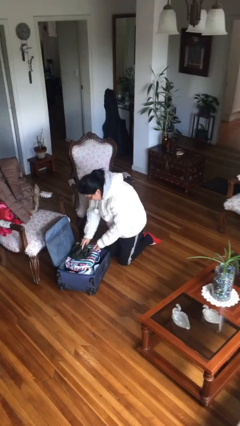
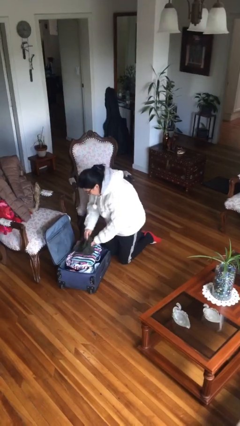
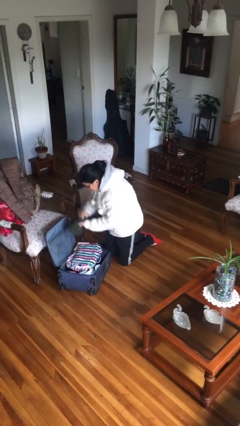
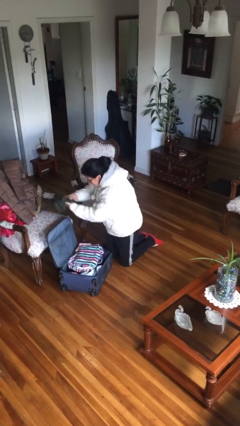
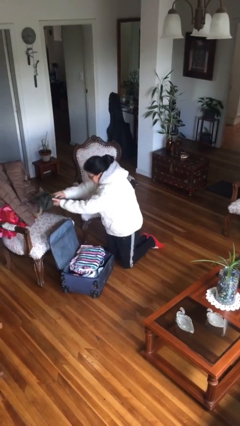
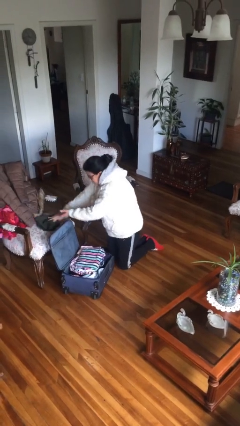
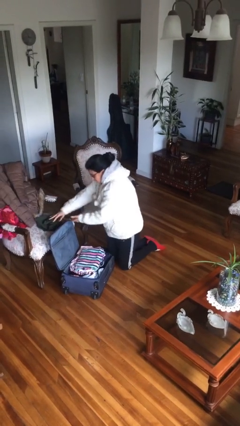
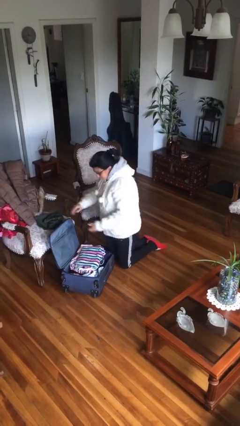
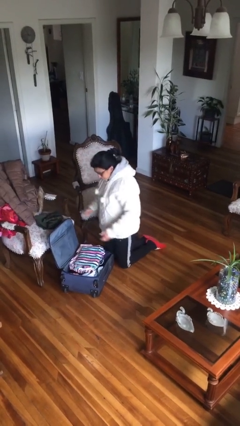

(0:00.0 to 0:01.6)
person unloads clothes from suitcase

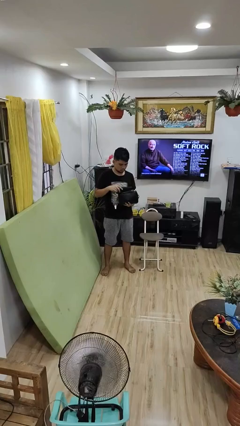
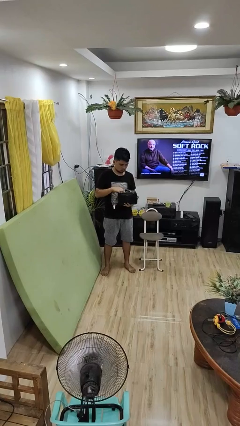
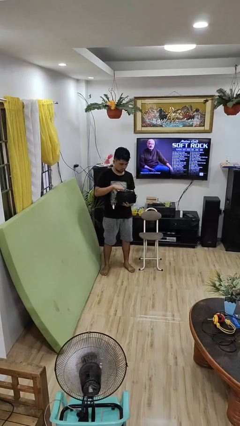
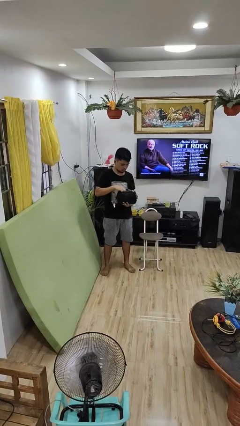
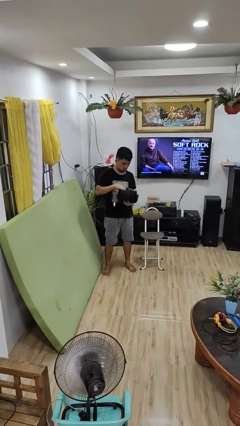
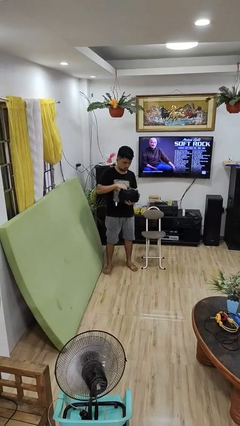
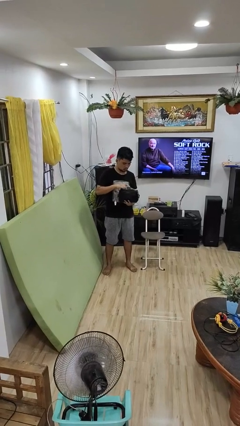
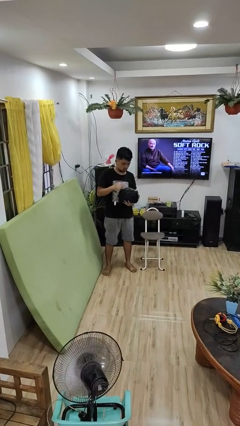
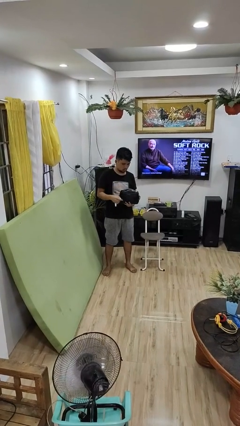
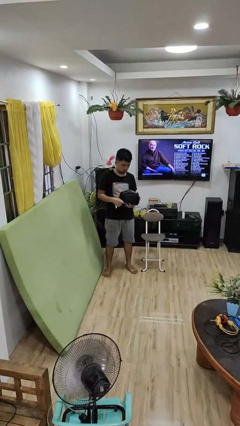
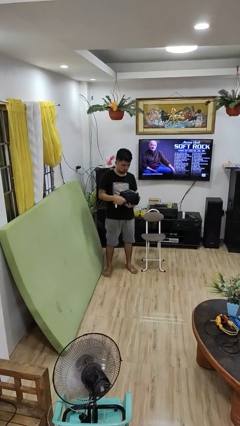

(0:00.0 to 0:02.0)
person puts object into purse

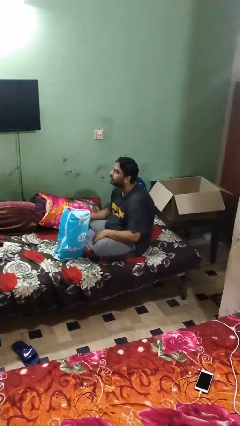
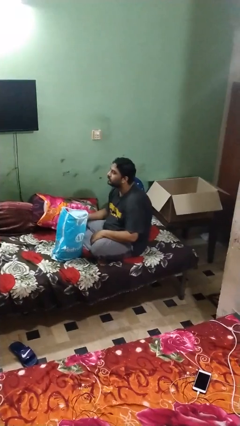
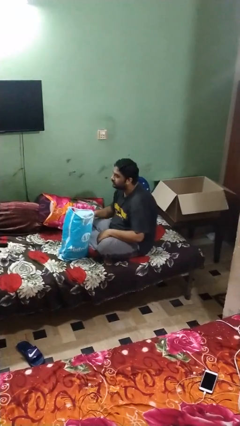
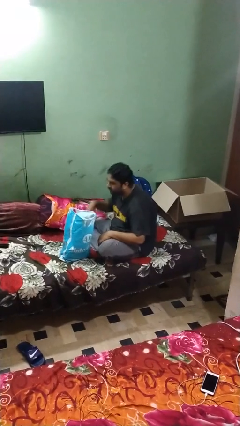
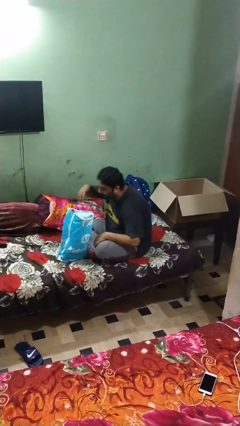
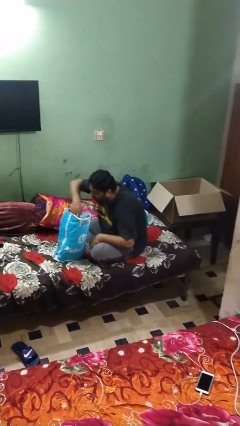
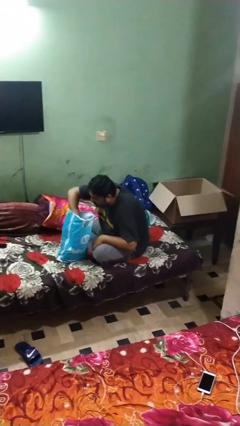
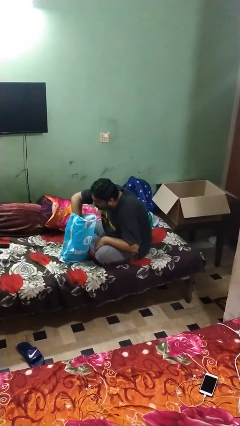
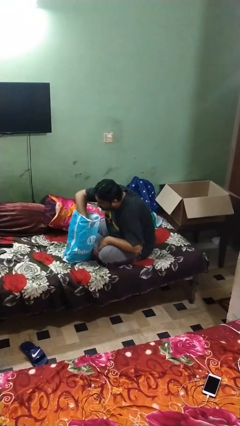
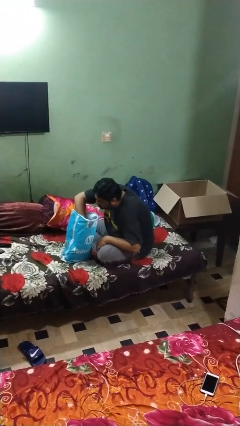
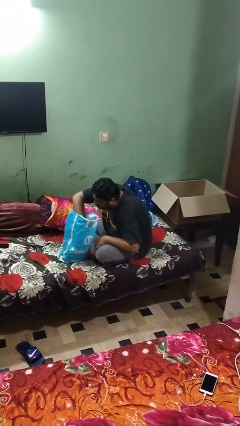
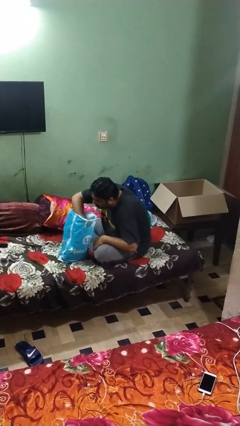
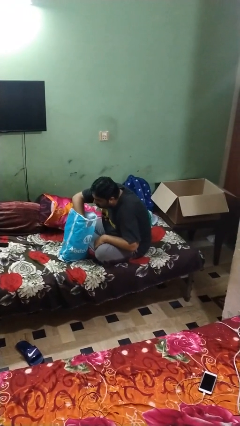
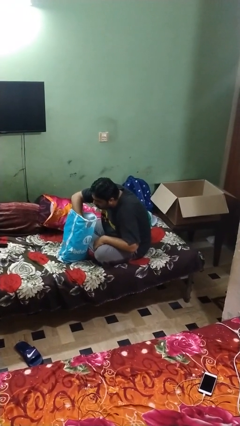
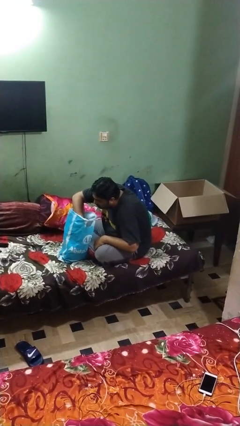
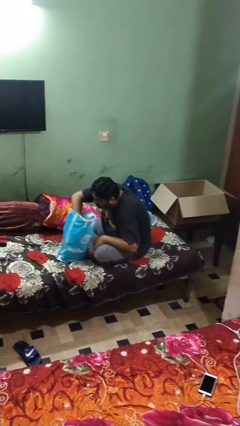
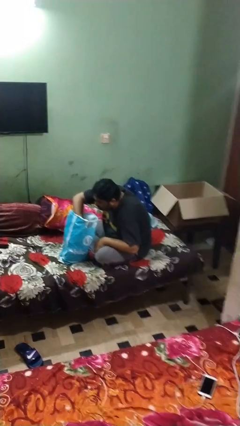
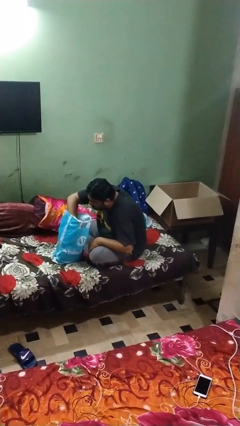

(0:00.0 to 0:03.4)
person searches in bag

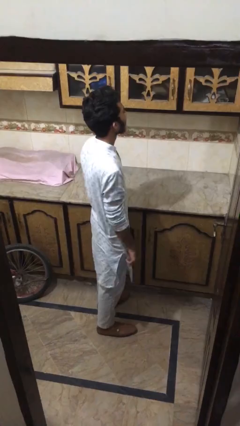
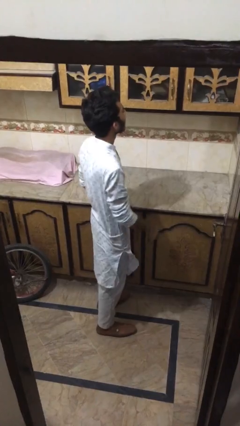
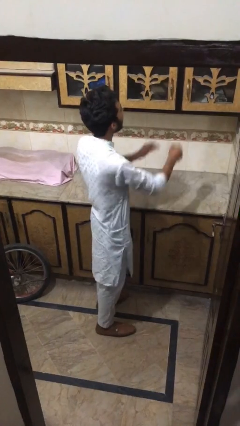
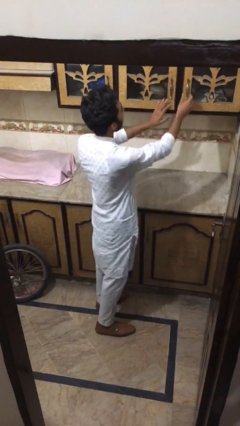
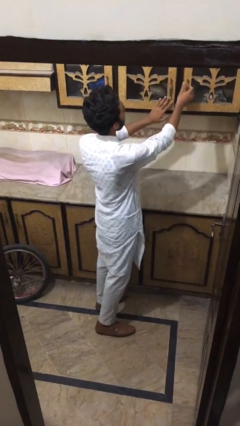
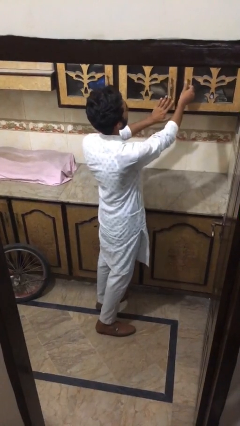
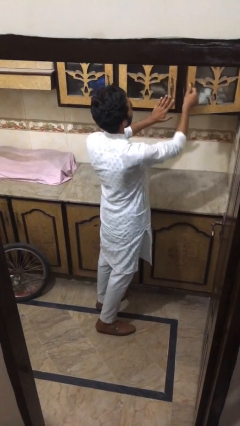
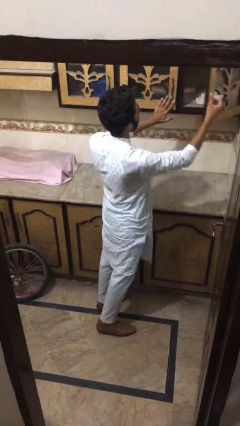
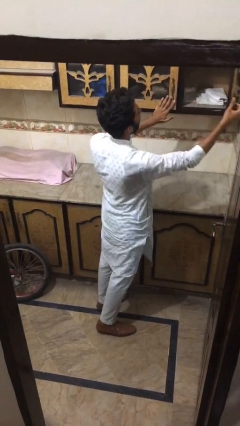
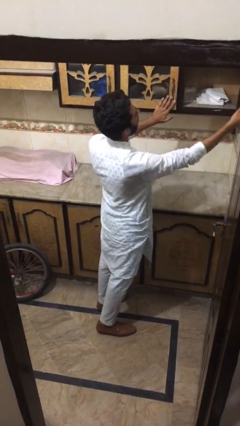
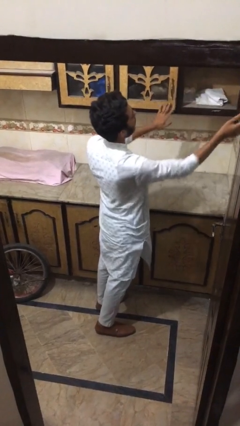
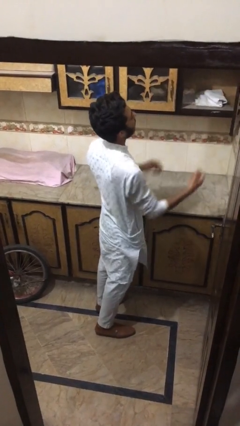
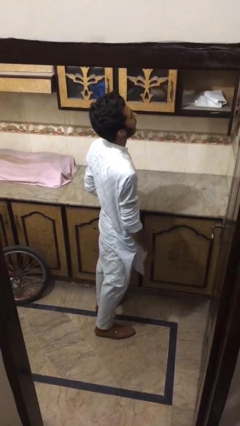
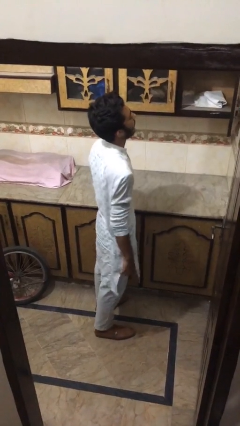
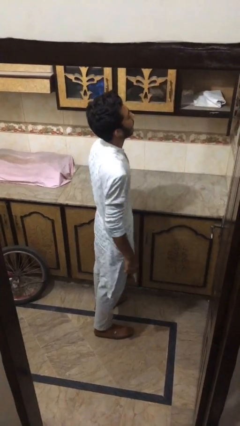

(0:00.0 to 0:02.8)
person opens cabinet

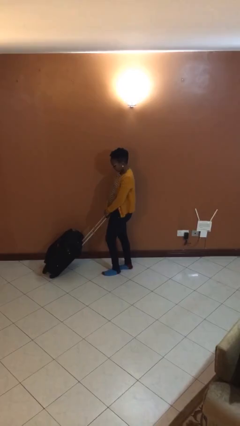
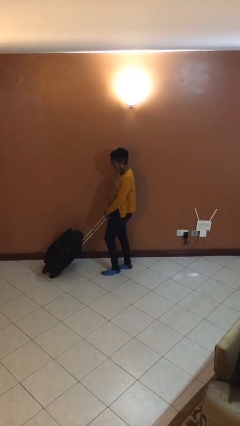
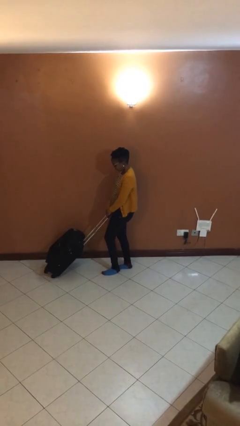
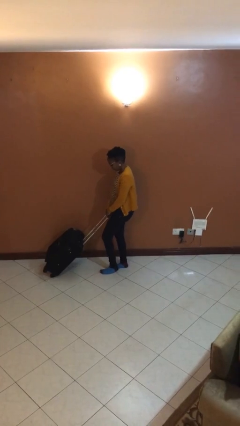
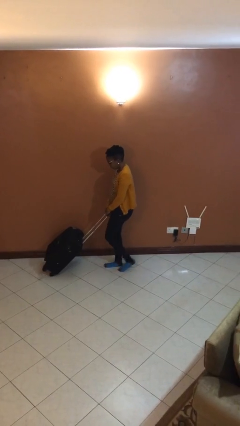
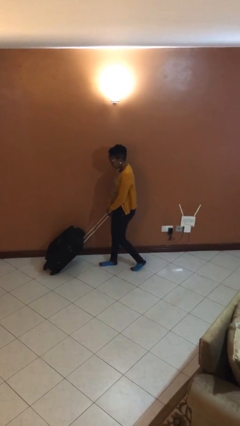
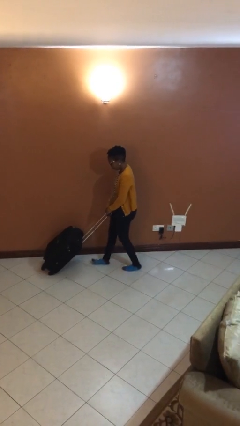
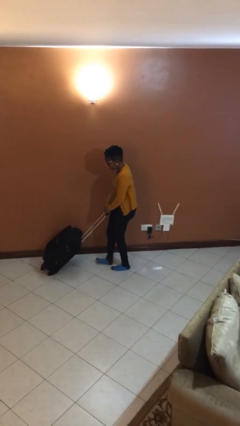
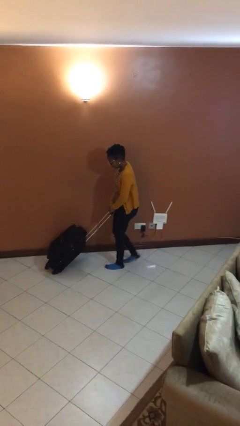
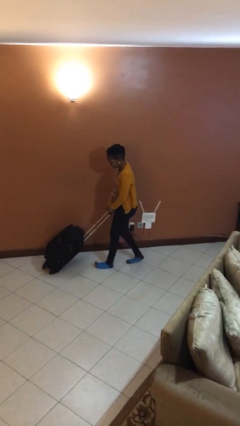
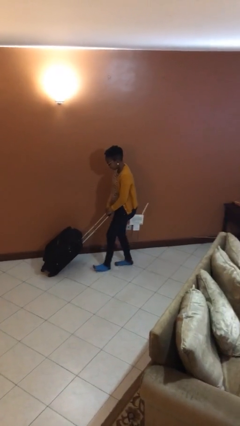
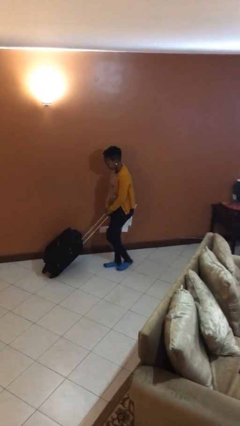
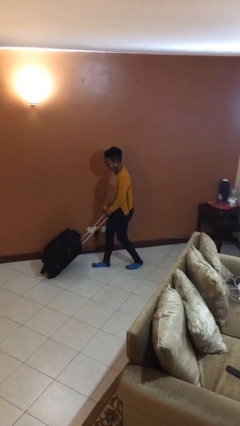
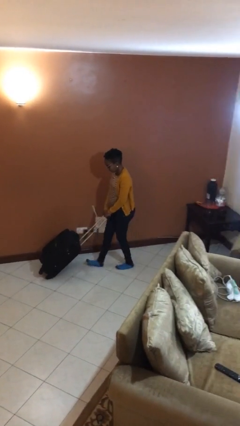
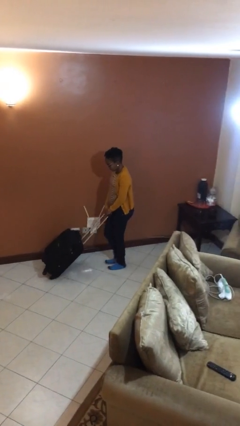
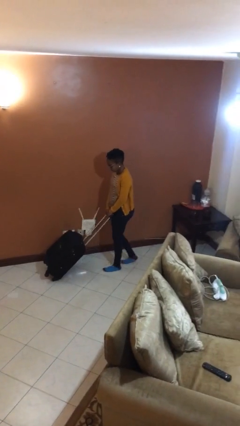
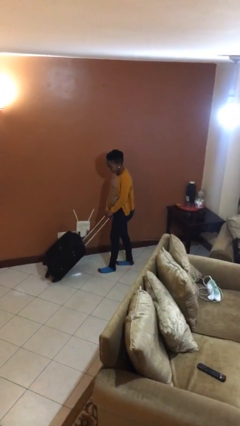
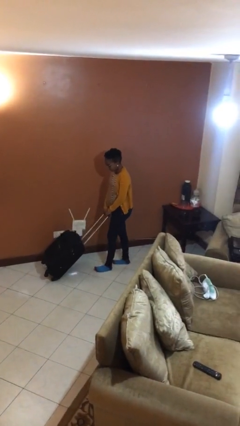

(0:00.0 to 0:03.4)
person pulls wheeled cart

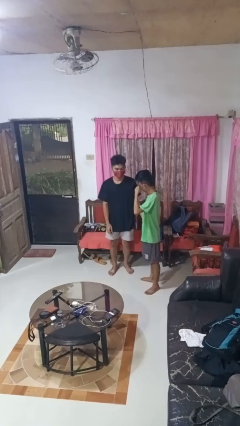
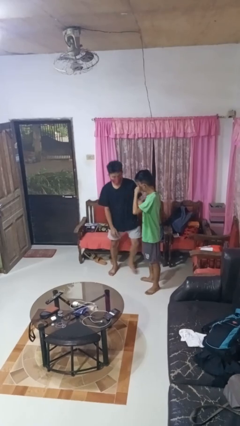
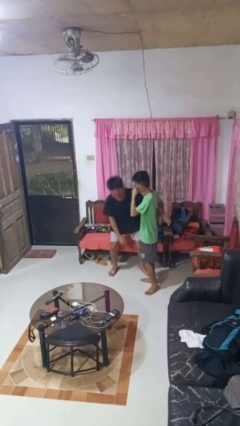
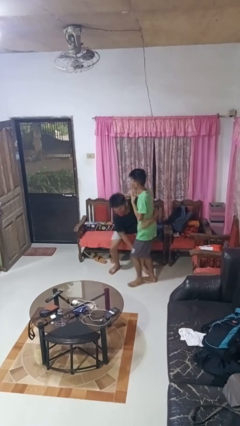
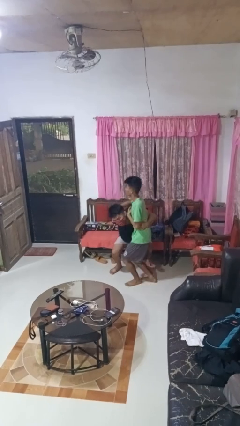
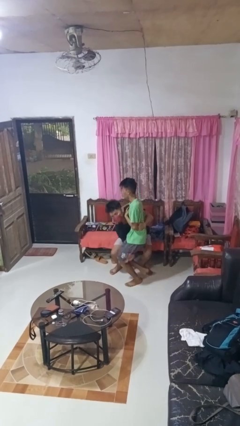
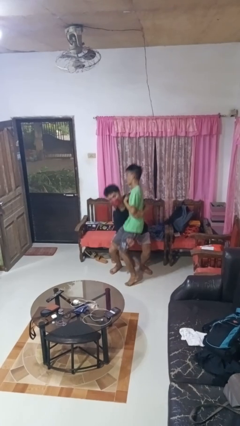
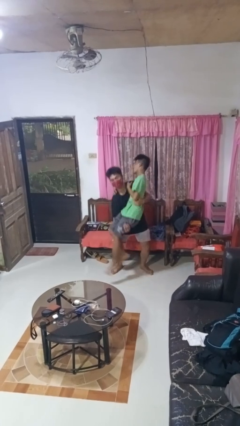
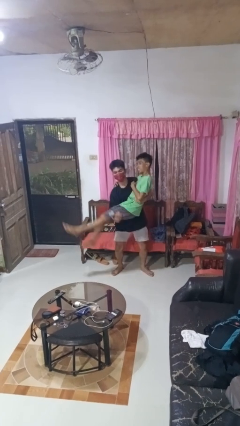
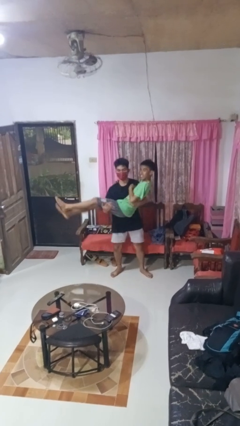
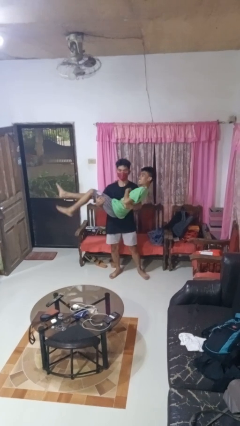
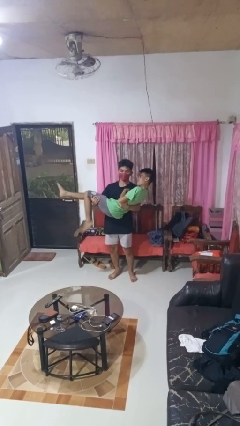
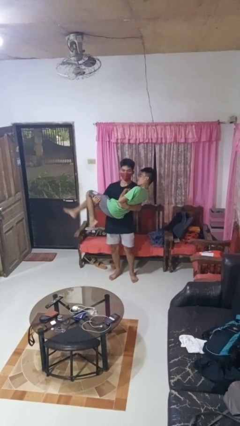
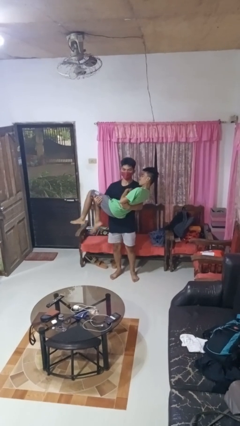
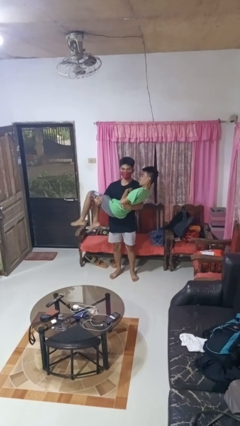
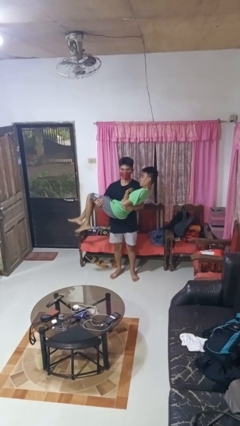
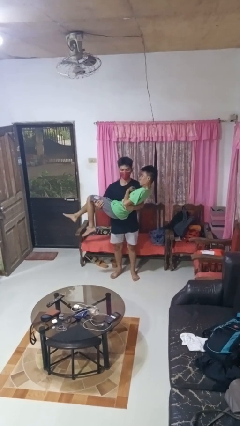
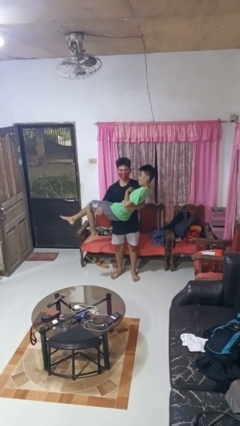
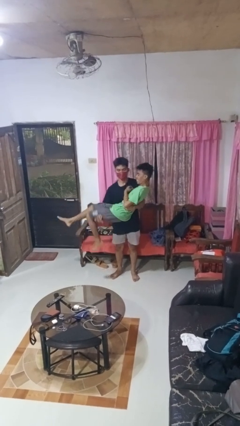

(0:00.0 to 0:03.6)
person carries person over shoulder

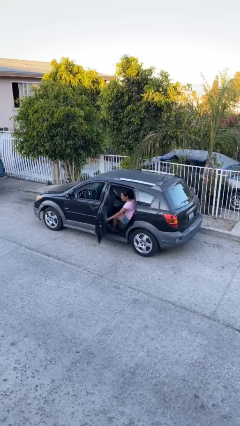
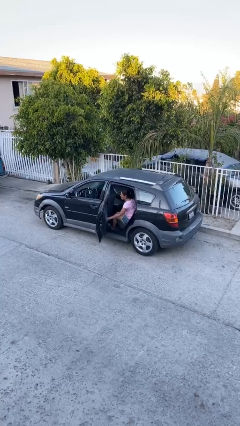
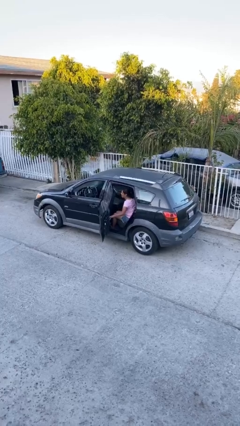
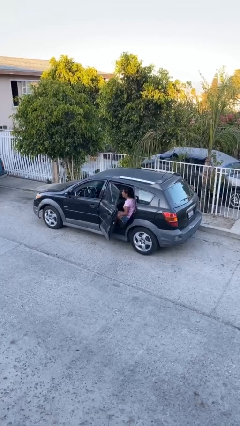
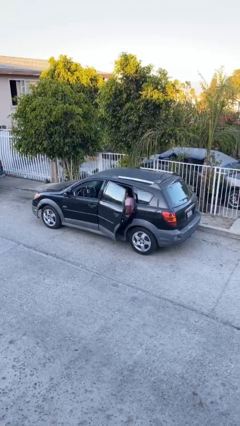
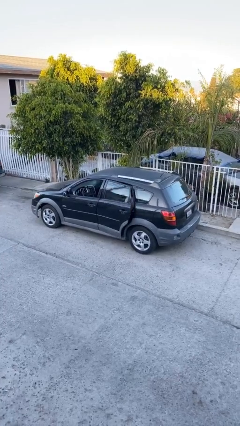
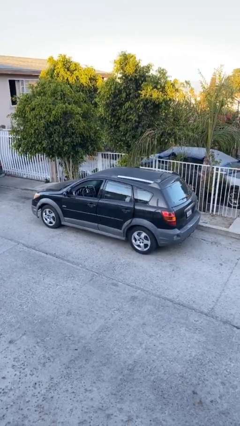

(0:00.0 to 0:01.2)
person closes car door
